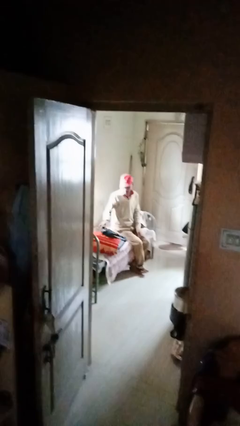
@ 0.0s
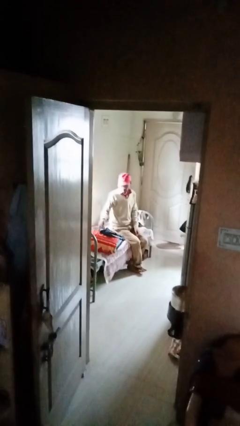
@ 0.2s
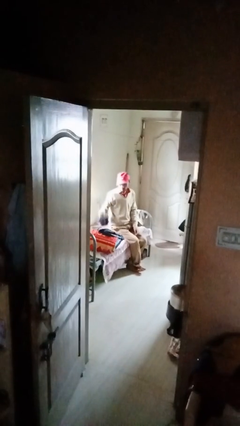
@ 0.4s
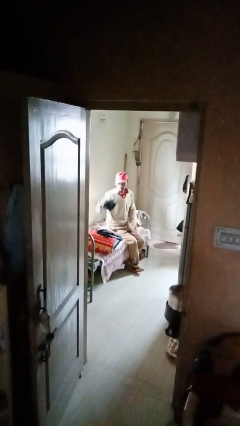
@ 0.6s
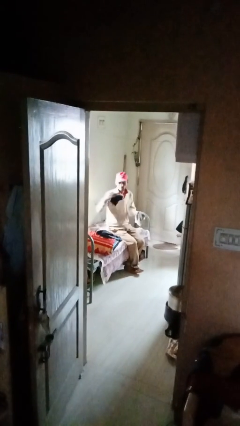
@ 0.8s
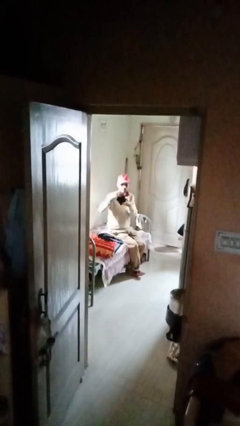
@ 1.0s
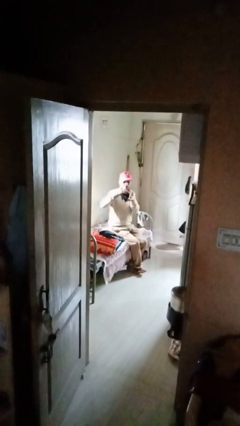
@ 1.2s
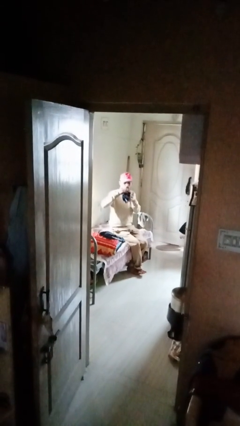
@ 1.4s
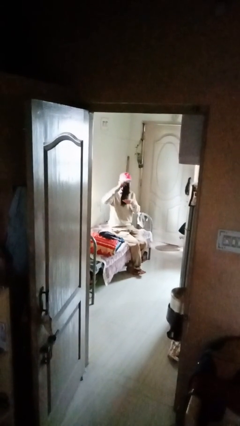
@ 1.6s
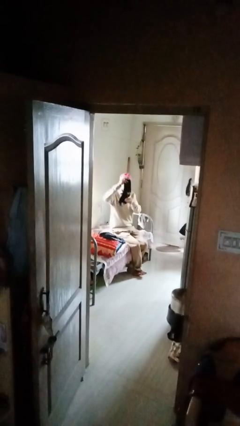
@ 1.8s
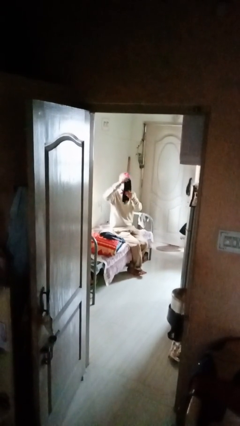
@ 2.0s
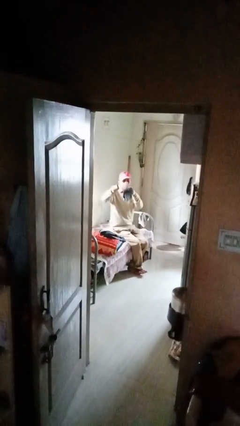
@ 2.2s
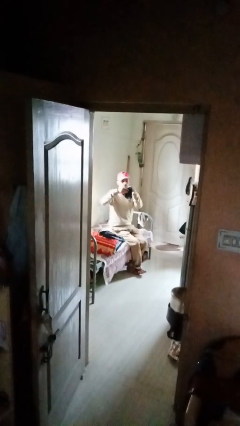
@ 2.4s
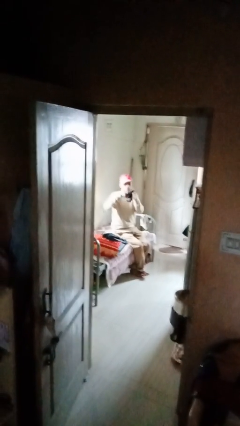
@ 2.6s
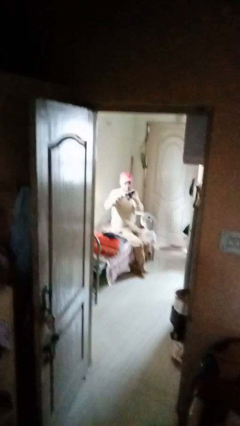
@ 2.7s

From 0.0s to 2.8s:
person folds socks

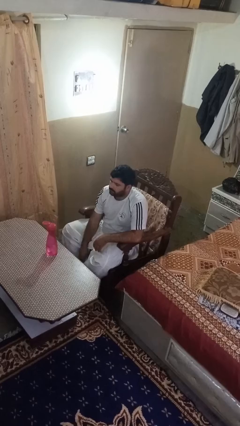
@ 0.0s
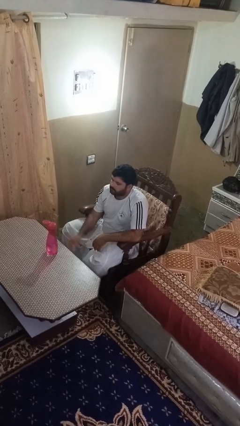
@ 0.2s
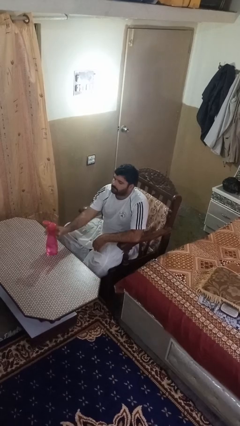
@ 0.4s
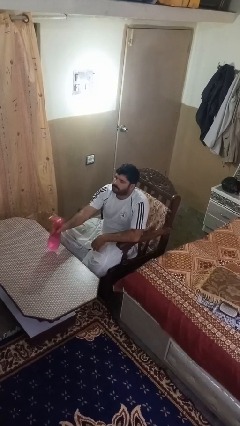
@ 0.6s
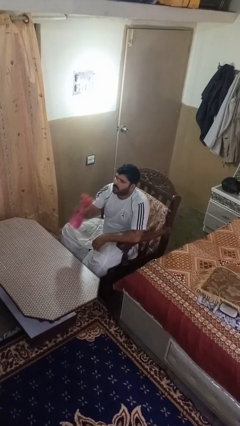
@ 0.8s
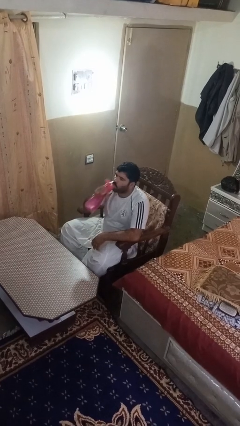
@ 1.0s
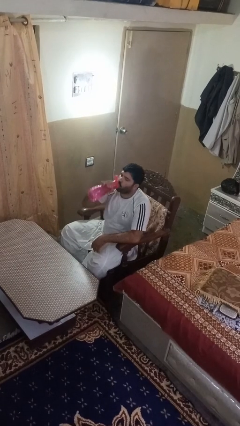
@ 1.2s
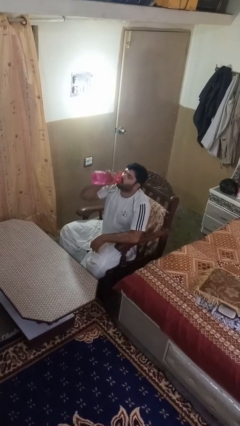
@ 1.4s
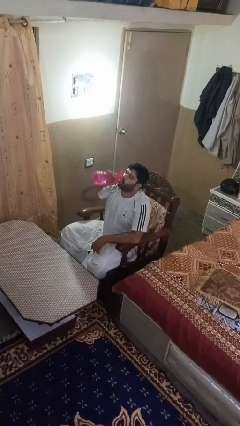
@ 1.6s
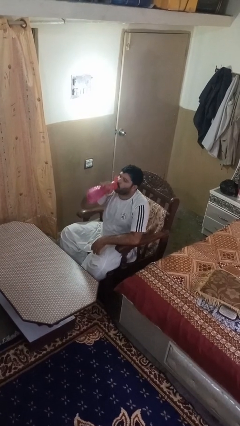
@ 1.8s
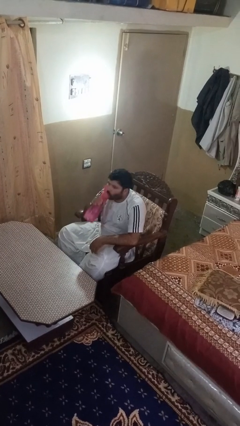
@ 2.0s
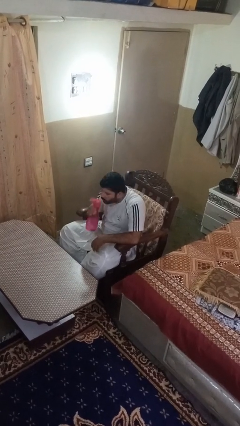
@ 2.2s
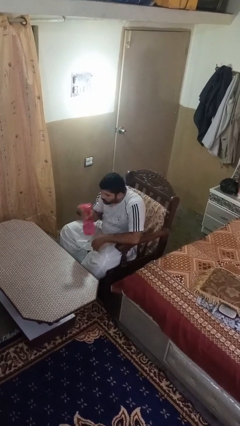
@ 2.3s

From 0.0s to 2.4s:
person drinks from bottle

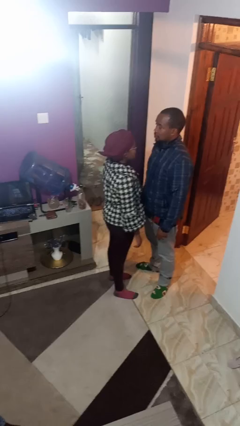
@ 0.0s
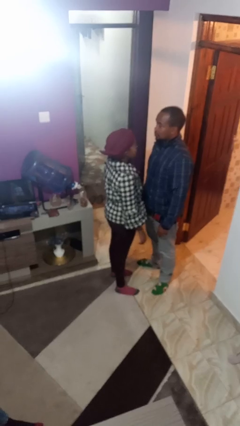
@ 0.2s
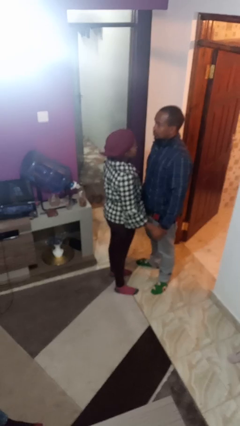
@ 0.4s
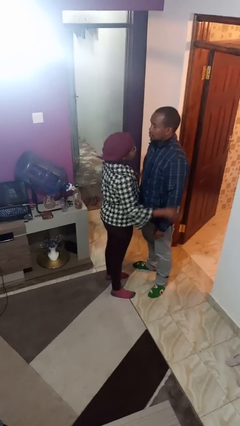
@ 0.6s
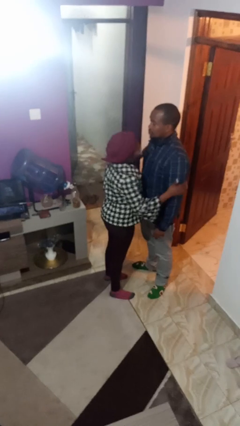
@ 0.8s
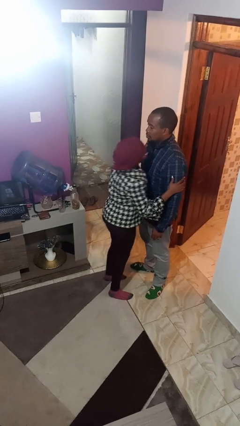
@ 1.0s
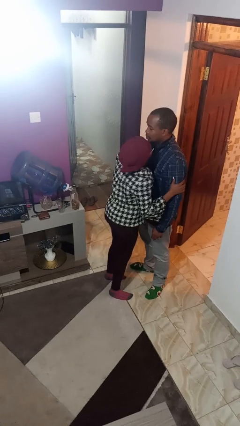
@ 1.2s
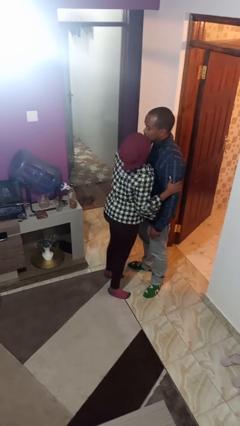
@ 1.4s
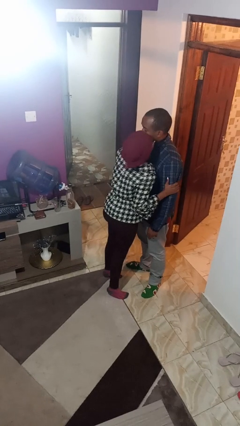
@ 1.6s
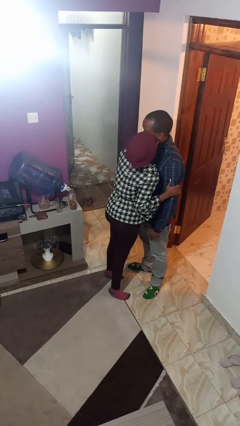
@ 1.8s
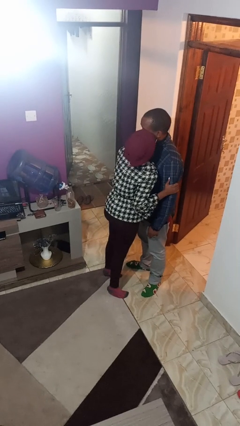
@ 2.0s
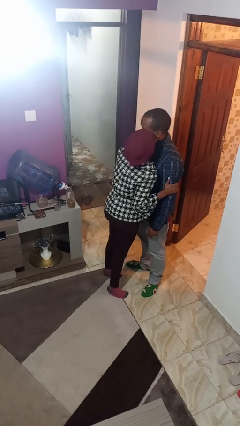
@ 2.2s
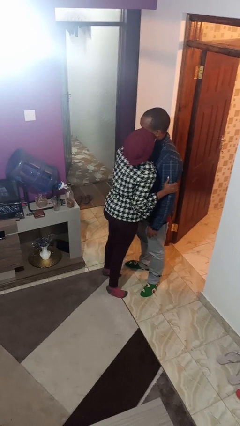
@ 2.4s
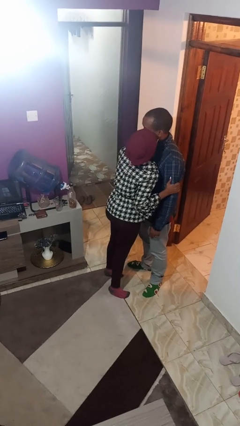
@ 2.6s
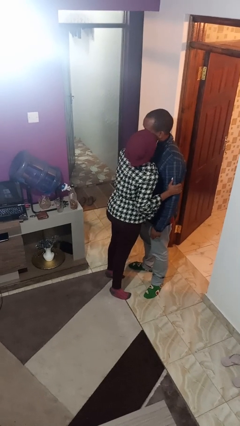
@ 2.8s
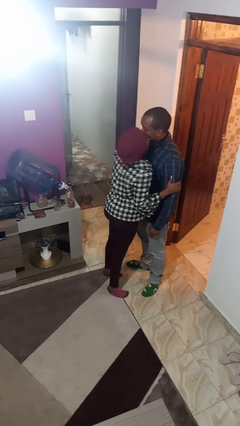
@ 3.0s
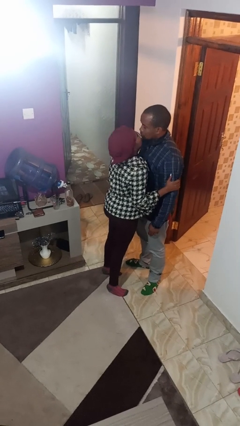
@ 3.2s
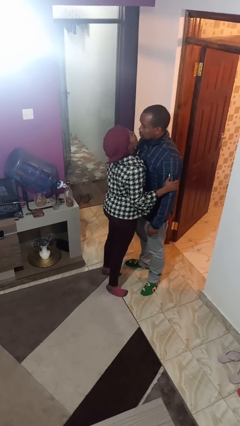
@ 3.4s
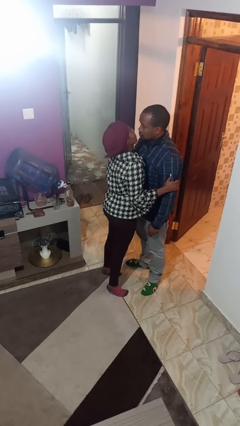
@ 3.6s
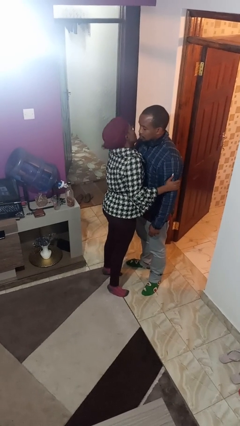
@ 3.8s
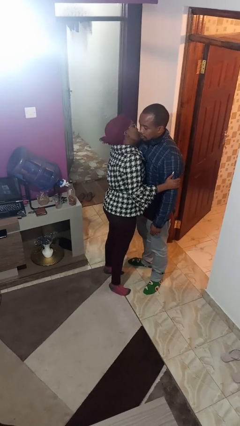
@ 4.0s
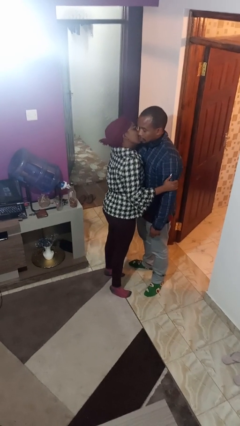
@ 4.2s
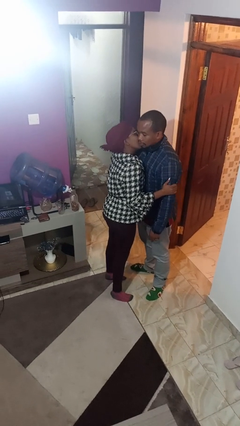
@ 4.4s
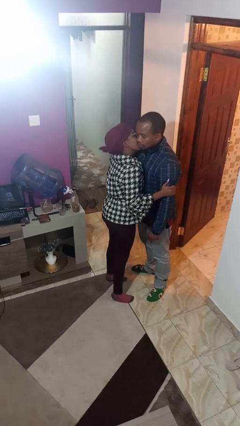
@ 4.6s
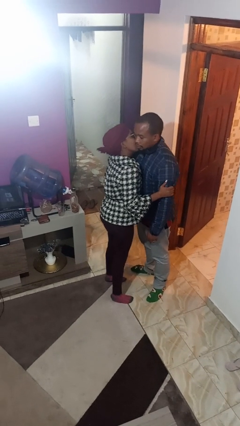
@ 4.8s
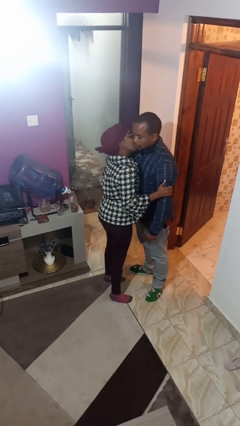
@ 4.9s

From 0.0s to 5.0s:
person kisses cheek of person

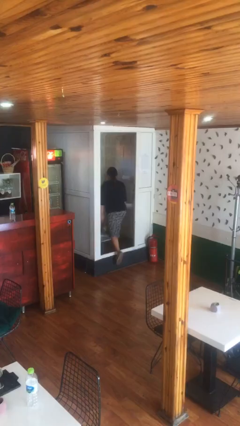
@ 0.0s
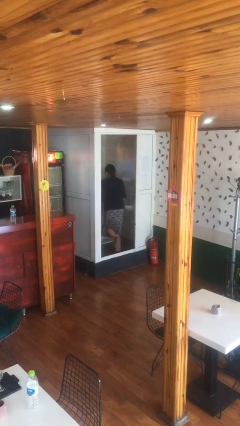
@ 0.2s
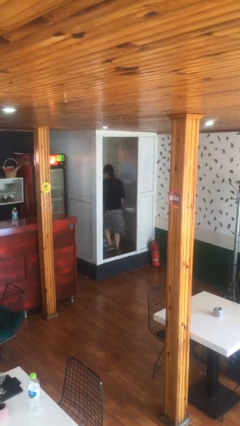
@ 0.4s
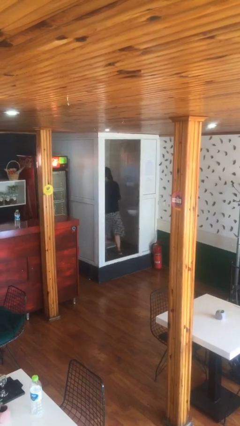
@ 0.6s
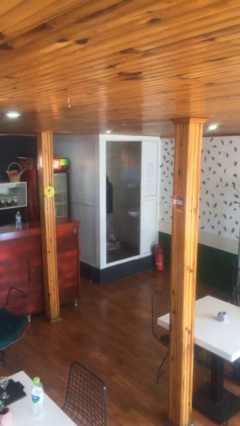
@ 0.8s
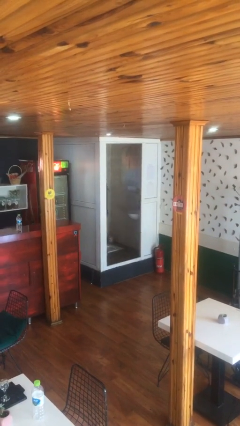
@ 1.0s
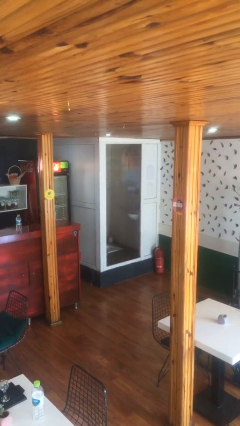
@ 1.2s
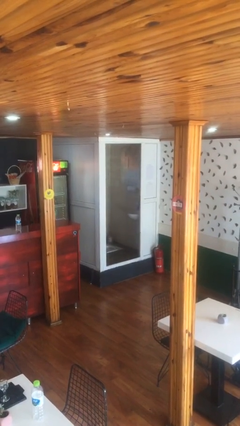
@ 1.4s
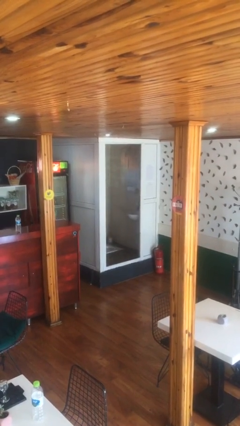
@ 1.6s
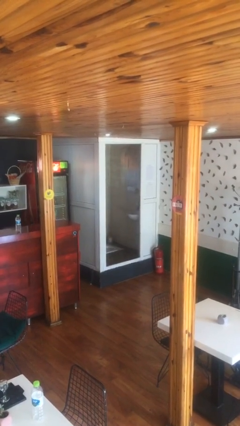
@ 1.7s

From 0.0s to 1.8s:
person exits scene through structure

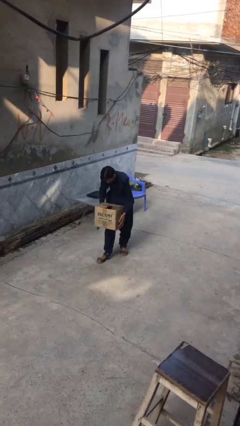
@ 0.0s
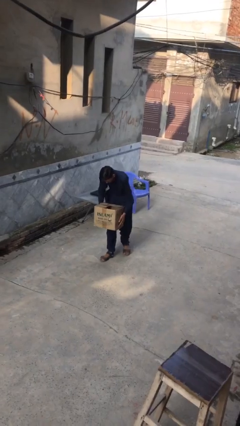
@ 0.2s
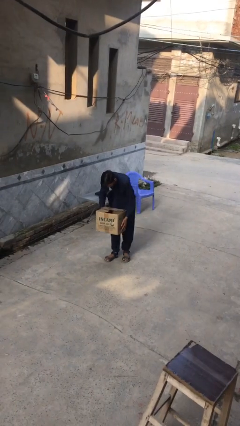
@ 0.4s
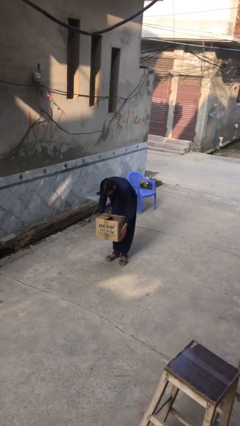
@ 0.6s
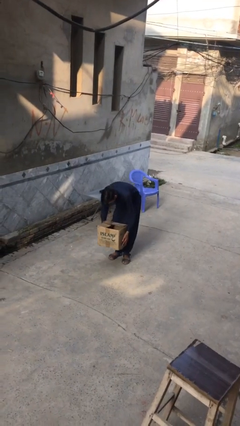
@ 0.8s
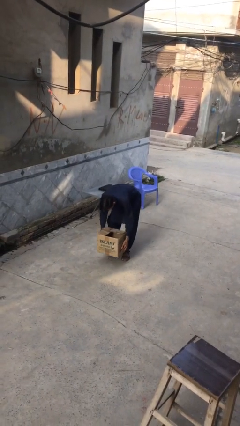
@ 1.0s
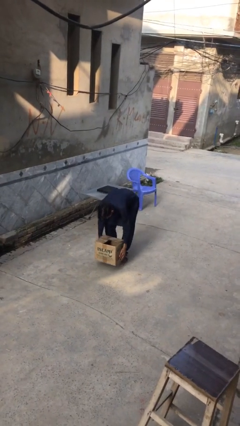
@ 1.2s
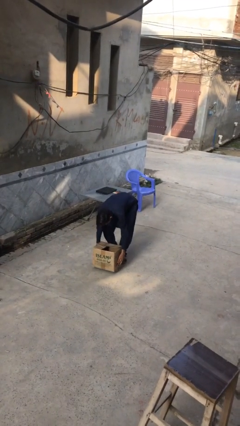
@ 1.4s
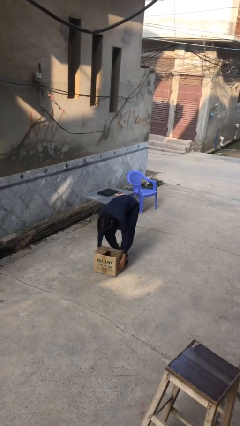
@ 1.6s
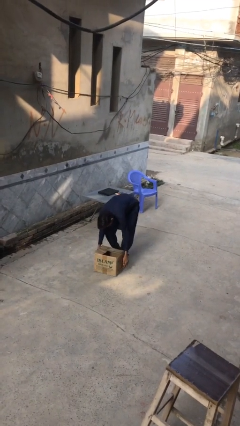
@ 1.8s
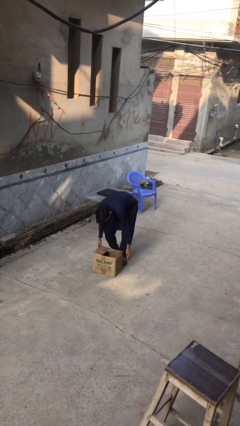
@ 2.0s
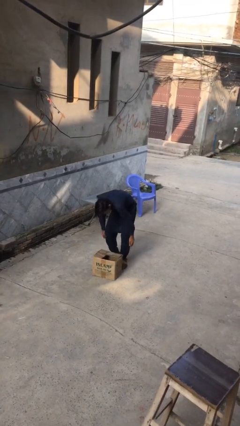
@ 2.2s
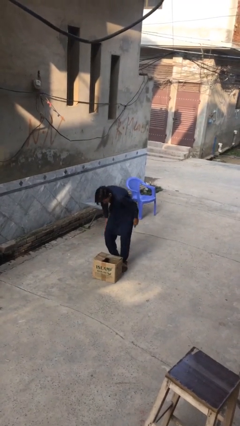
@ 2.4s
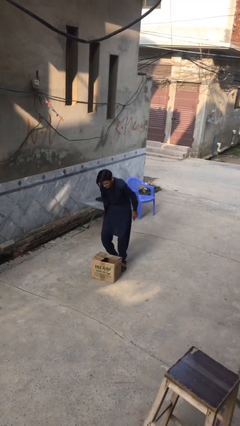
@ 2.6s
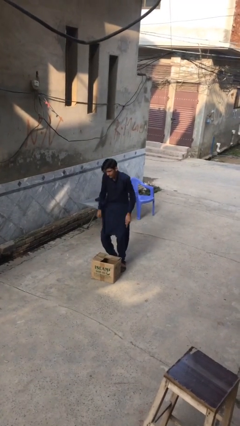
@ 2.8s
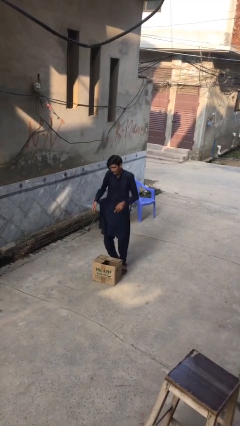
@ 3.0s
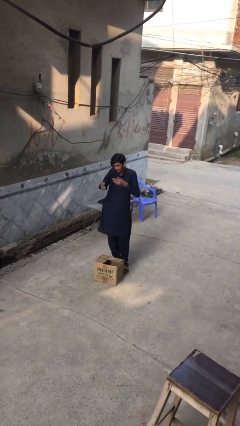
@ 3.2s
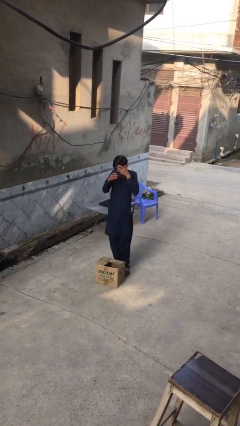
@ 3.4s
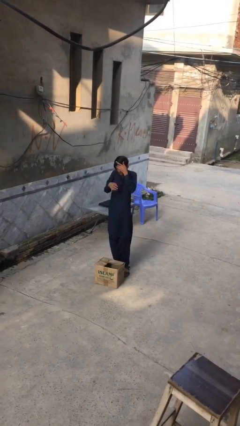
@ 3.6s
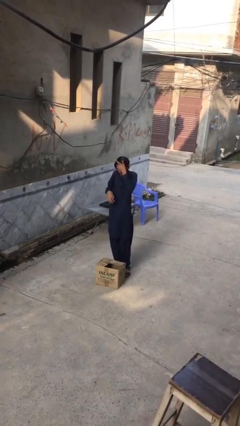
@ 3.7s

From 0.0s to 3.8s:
person puts down object on floor

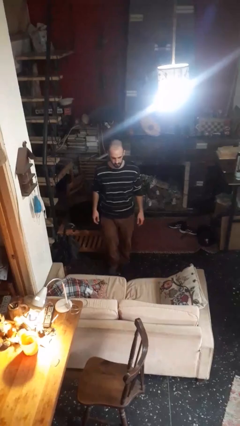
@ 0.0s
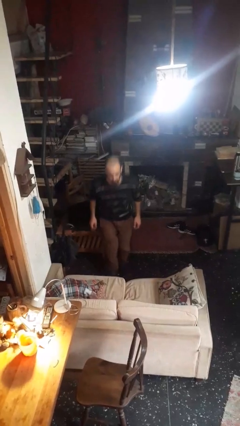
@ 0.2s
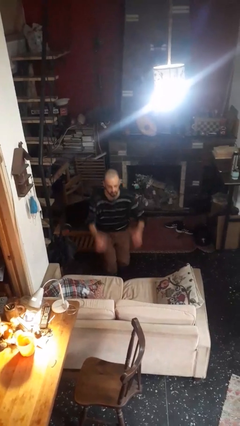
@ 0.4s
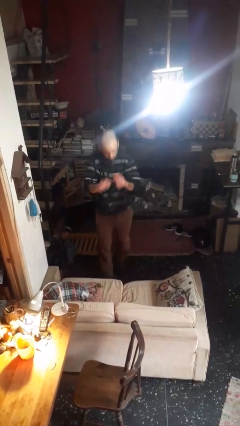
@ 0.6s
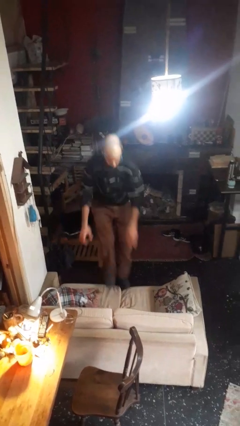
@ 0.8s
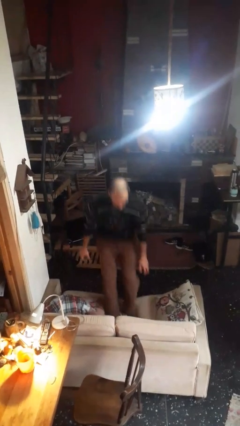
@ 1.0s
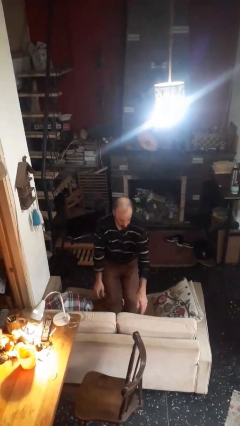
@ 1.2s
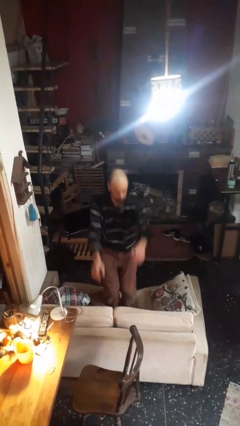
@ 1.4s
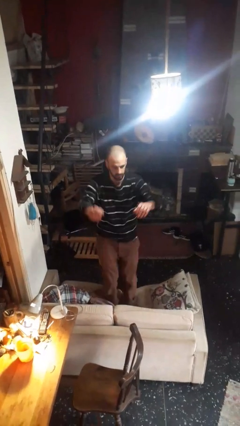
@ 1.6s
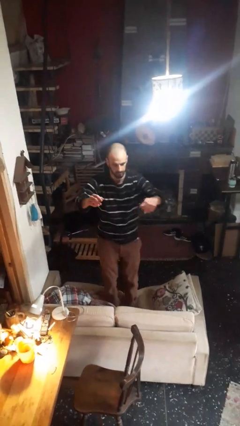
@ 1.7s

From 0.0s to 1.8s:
person climbs on couch
